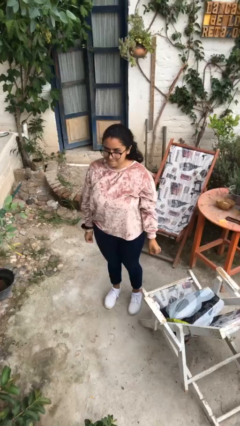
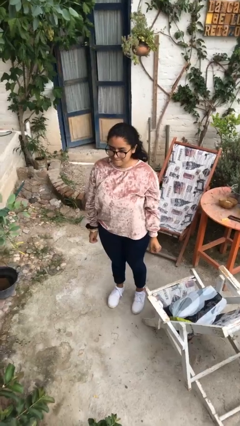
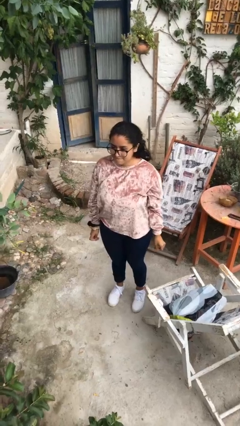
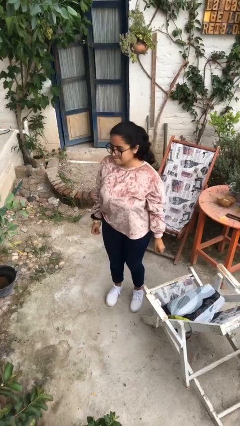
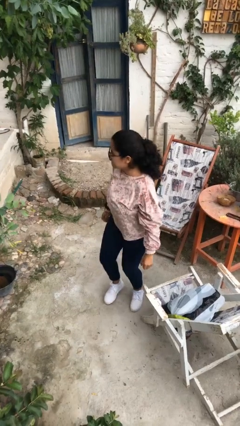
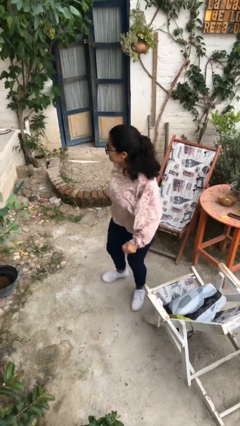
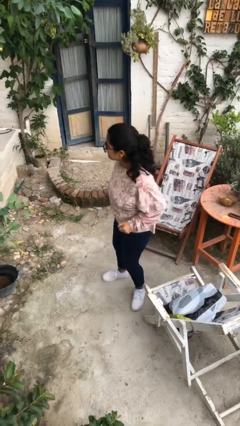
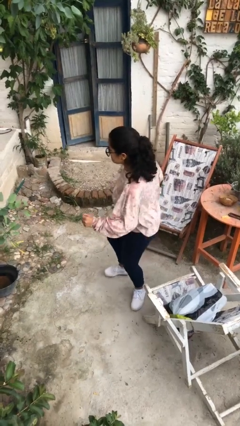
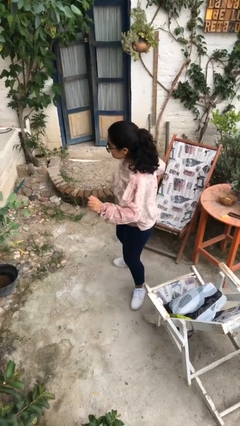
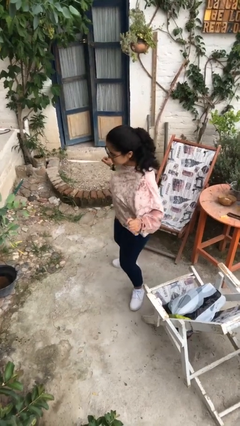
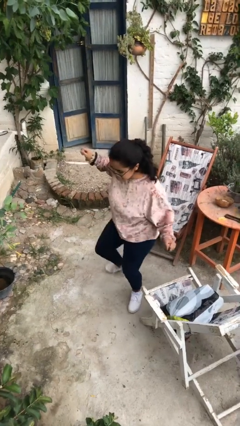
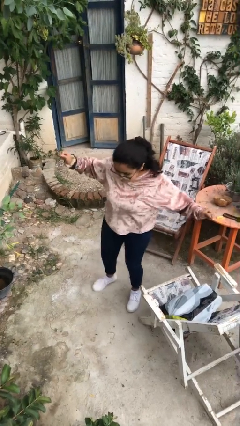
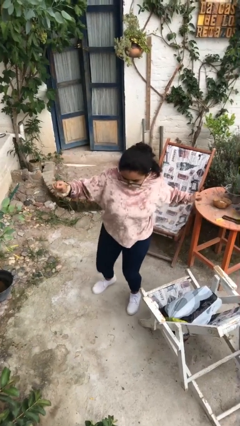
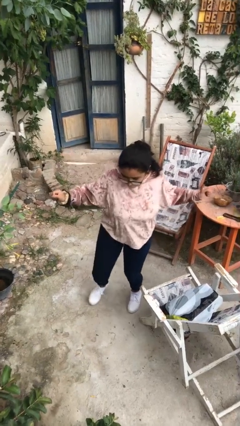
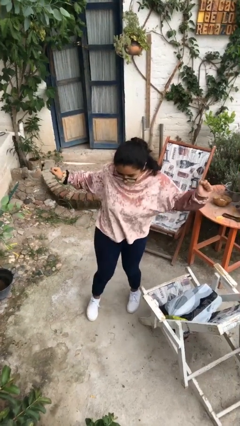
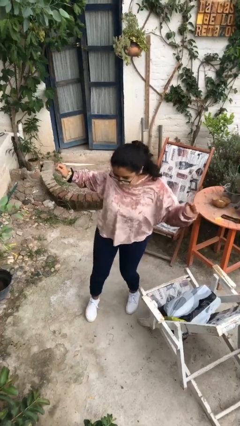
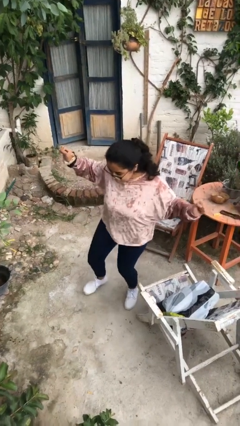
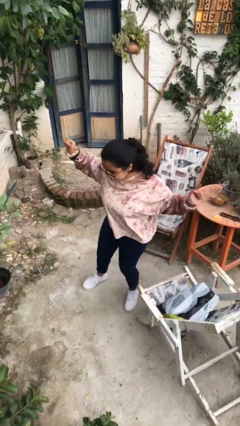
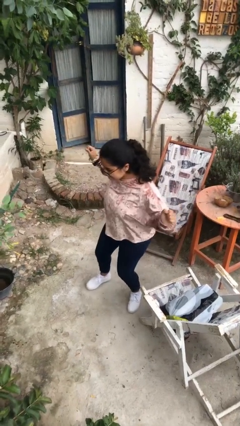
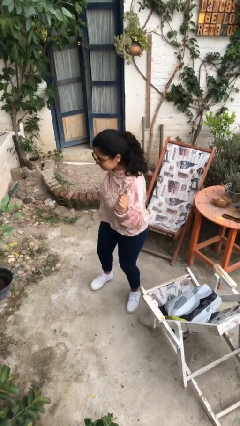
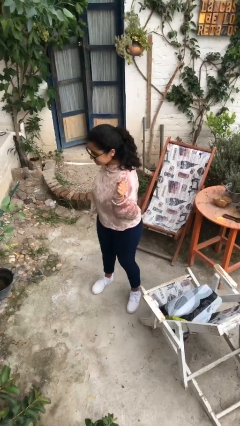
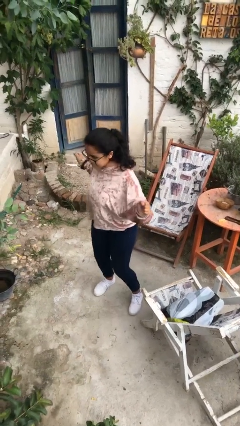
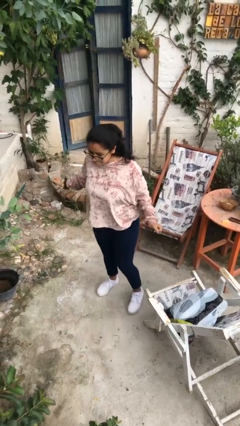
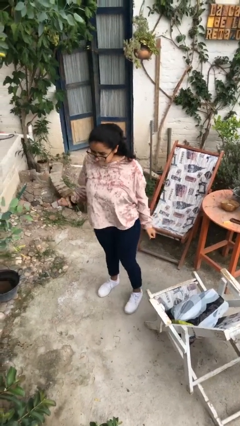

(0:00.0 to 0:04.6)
person dances in place

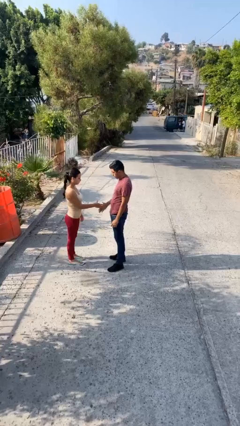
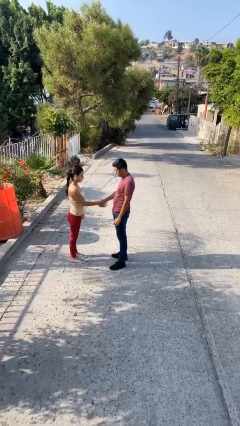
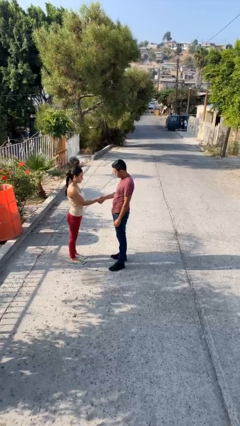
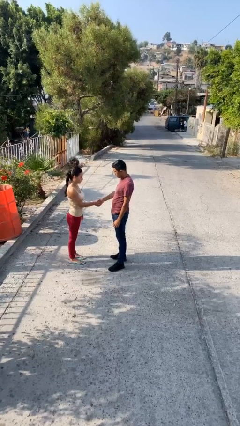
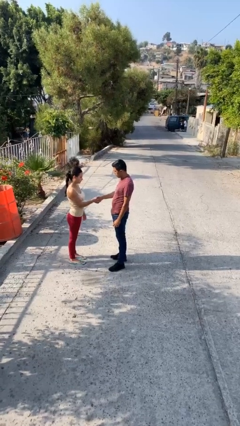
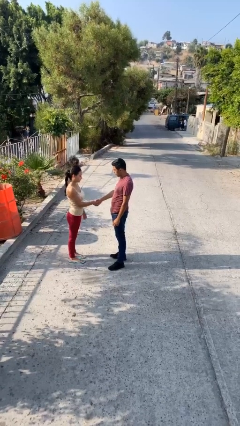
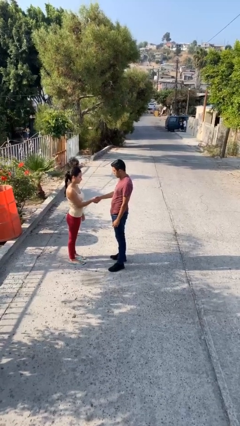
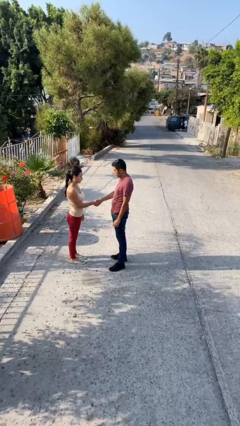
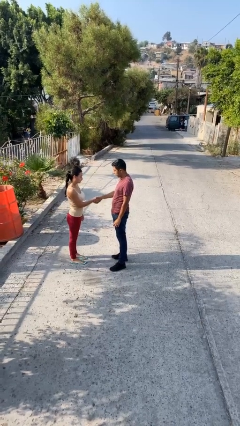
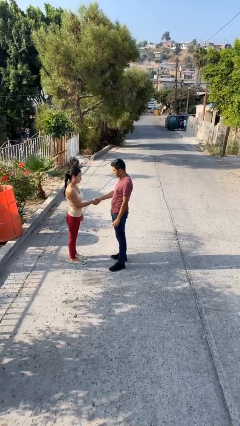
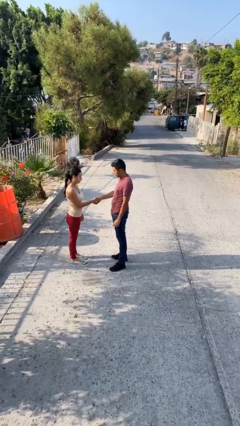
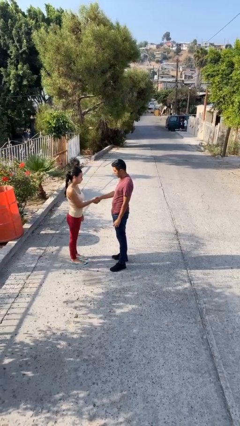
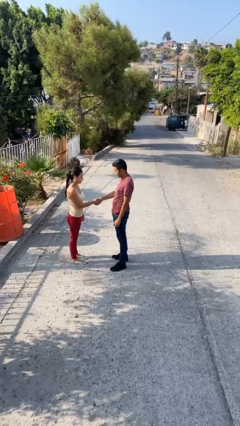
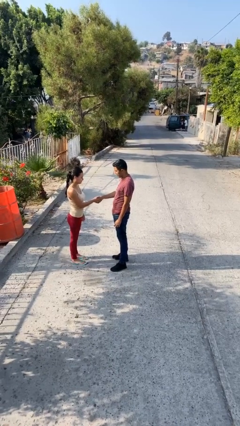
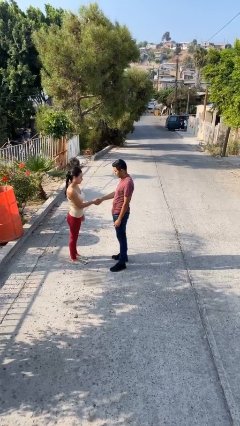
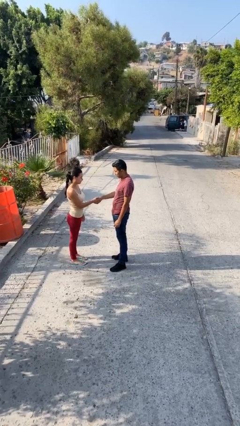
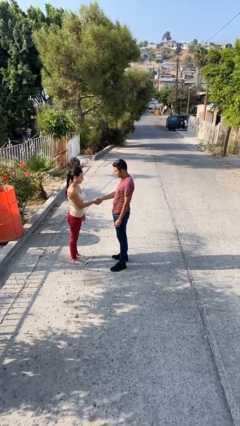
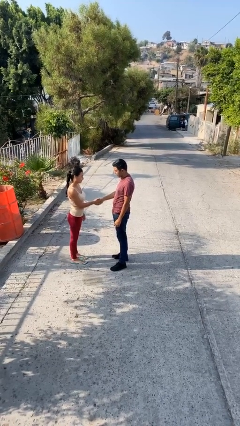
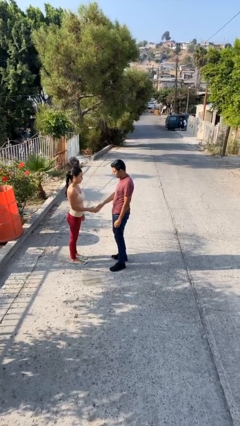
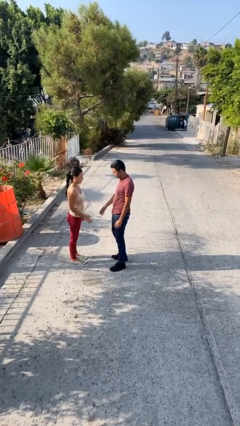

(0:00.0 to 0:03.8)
person shakes hand

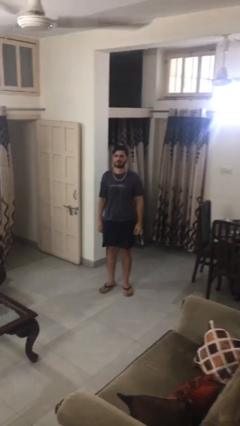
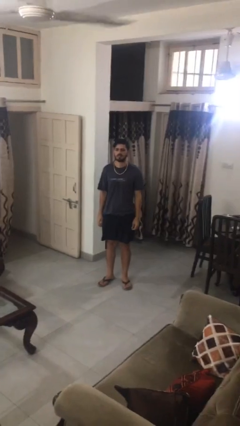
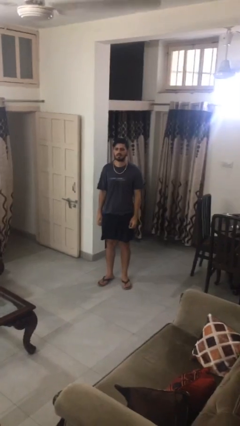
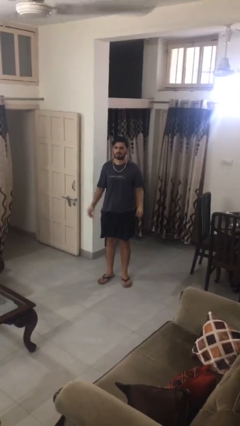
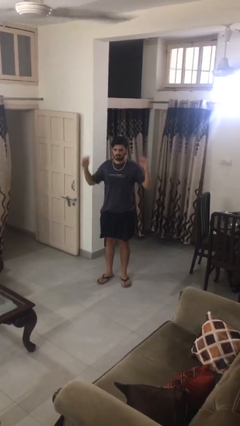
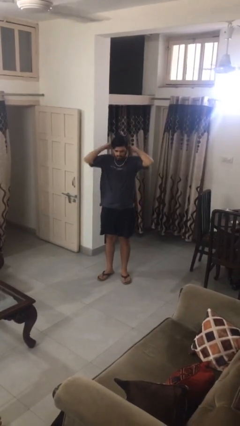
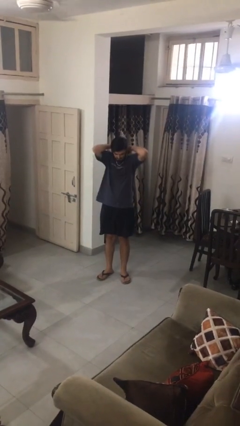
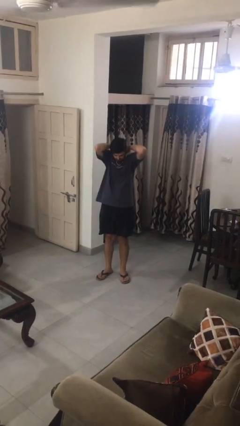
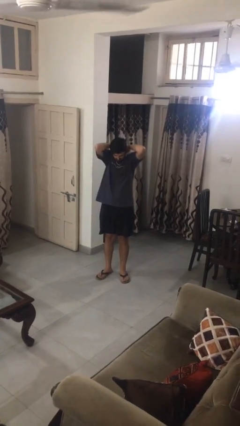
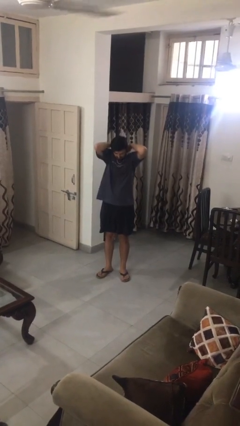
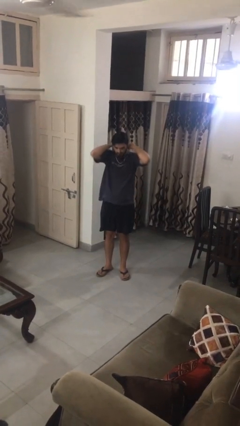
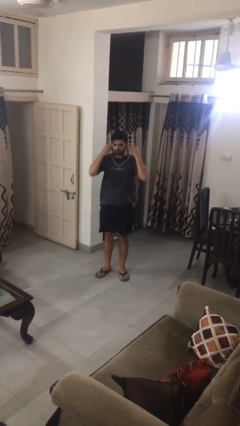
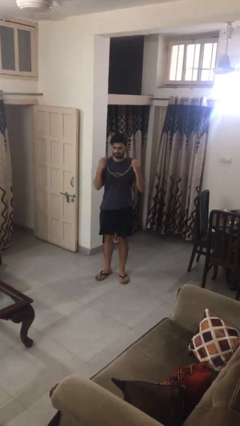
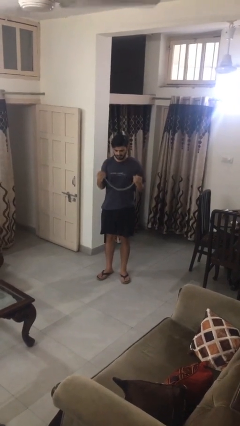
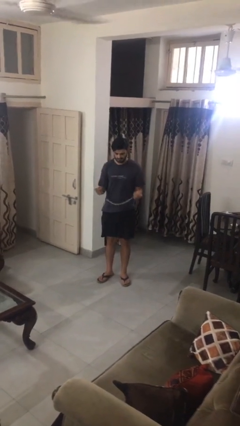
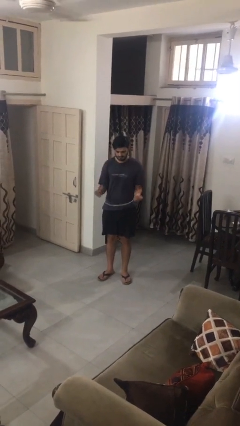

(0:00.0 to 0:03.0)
person takes off necklace

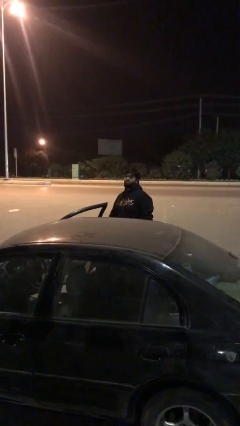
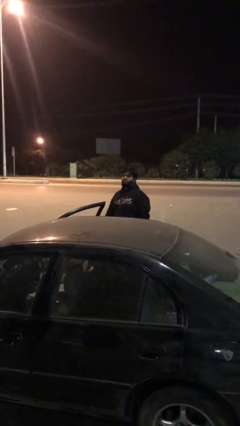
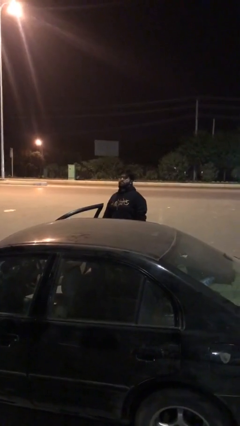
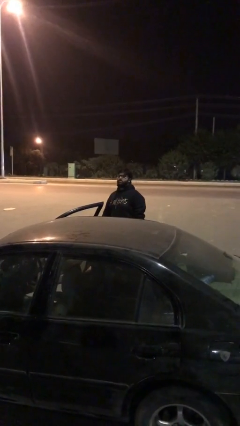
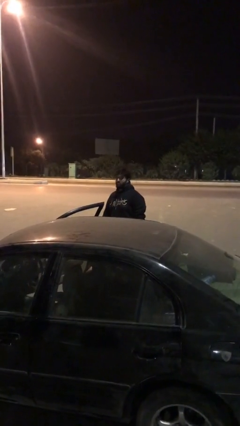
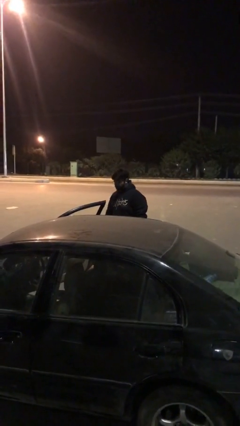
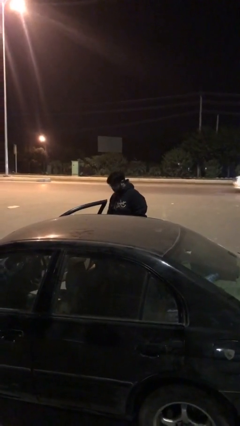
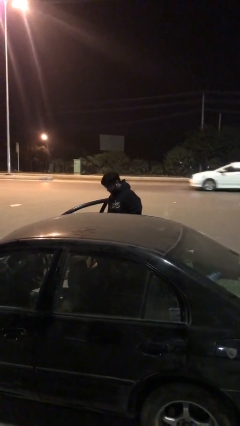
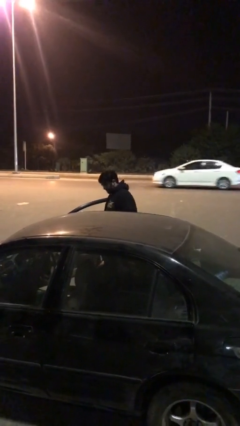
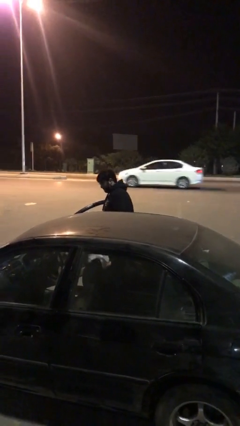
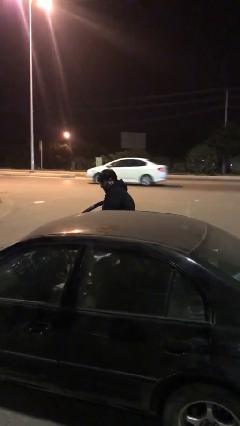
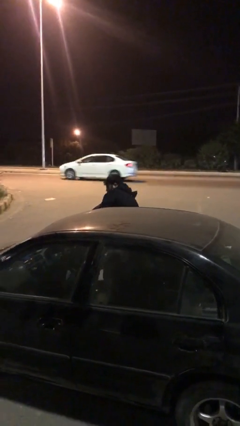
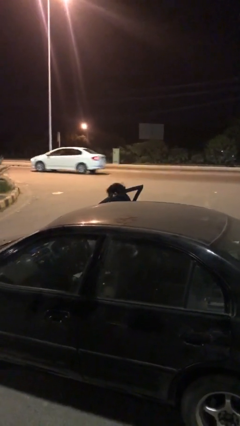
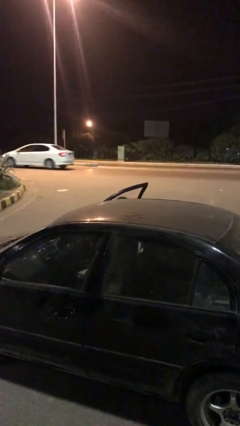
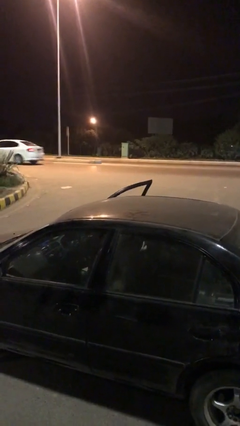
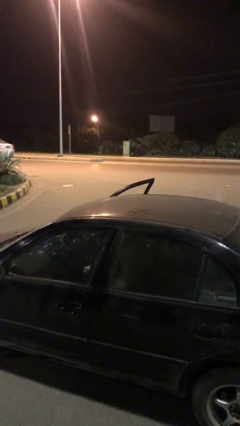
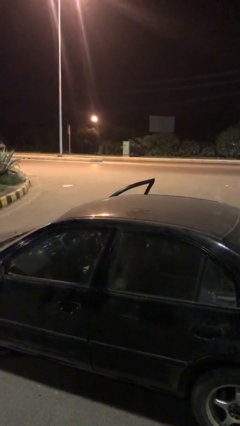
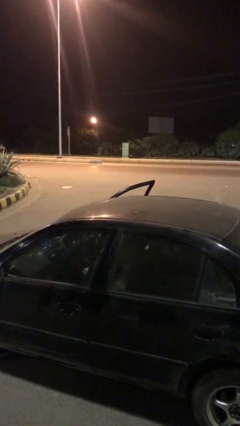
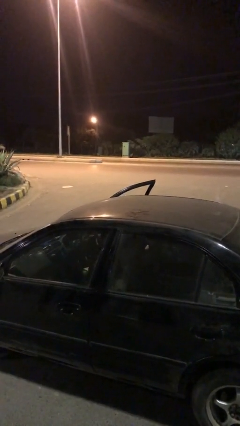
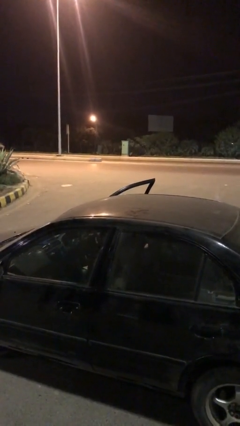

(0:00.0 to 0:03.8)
person enters car

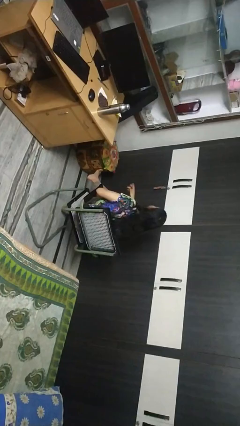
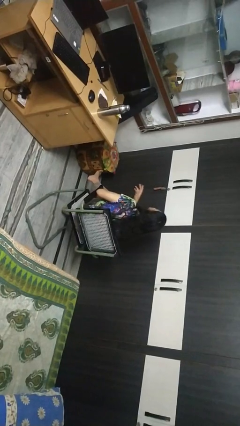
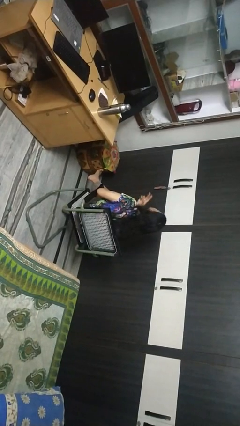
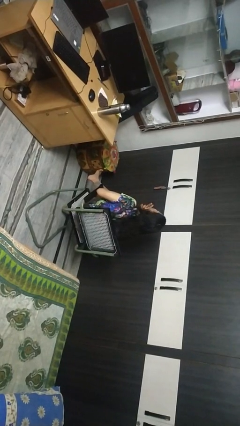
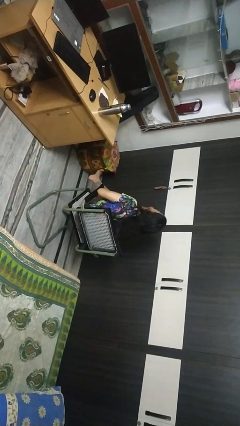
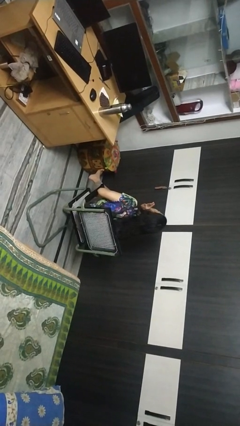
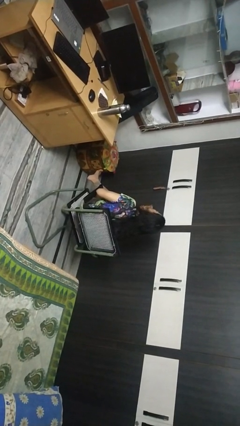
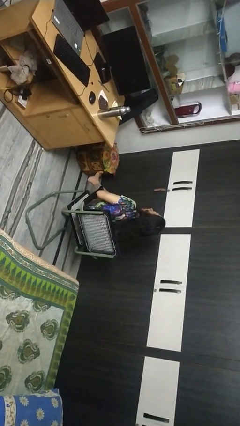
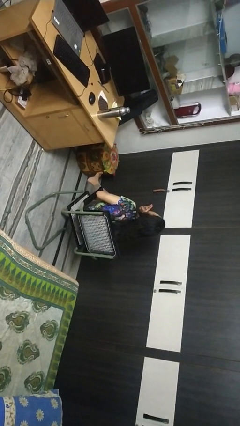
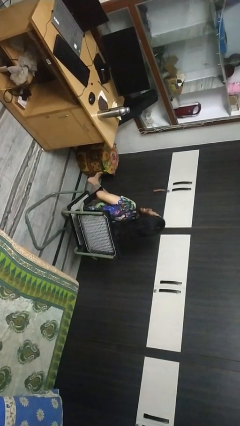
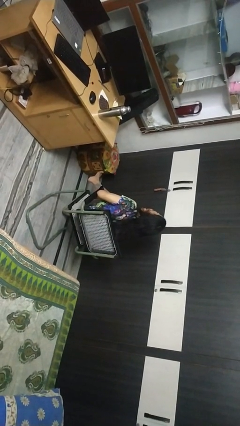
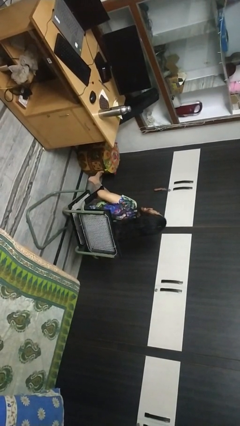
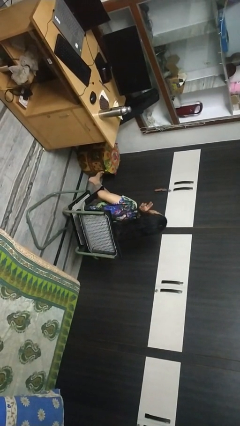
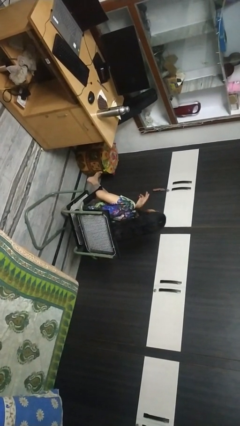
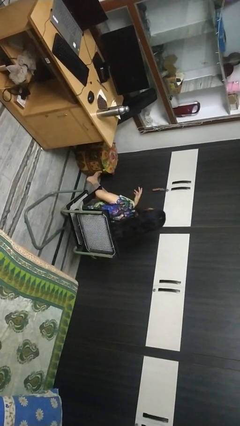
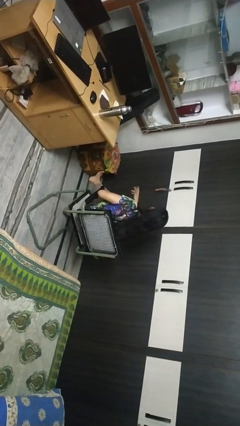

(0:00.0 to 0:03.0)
person strokes chin
